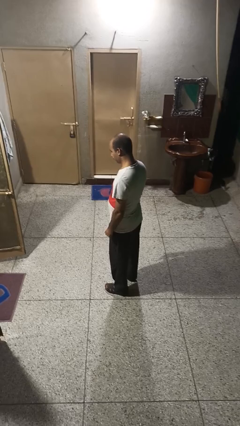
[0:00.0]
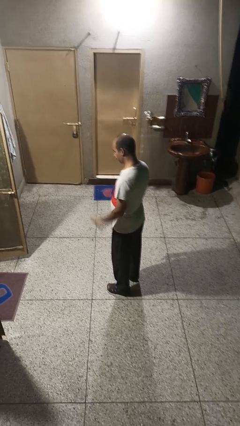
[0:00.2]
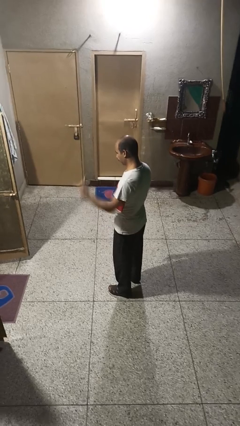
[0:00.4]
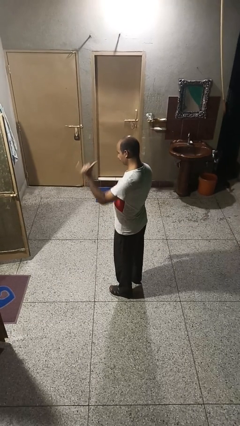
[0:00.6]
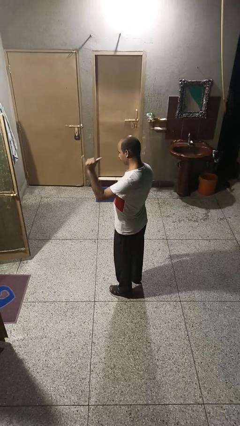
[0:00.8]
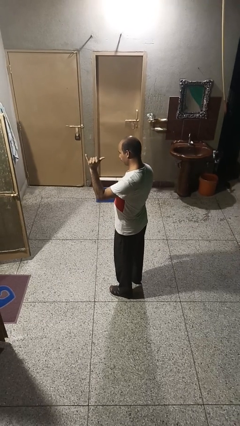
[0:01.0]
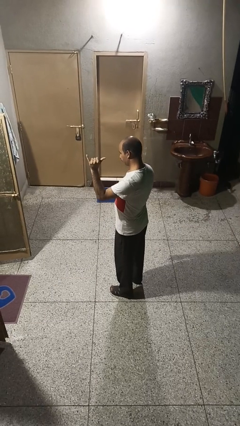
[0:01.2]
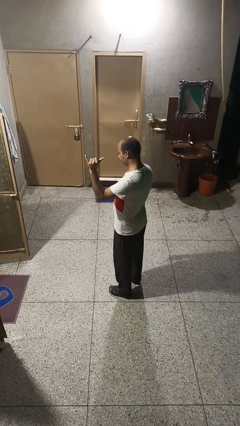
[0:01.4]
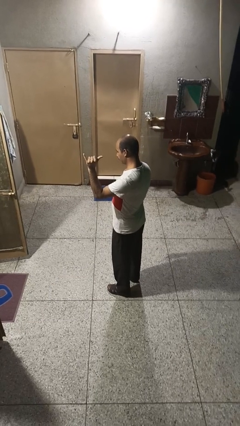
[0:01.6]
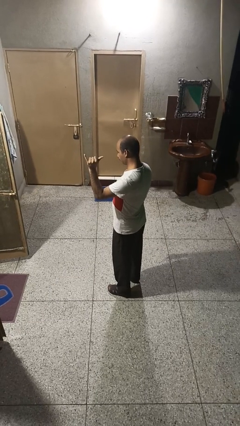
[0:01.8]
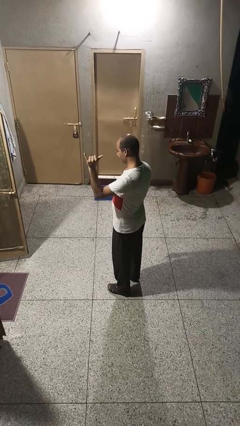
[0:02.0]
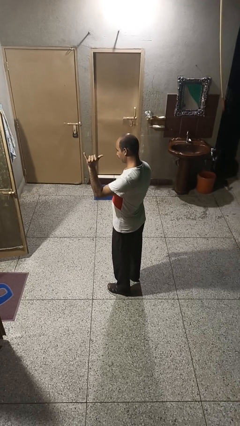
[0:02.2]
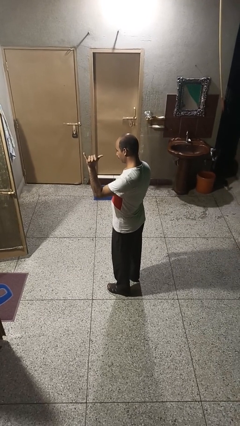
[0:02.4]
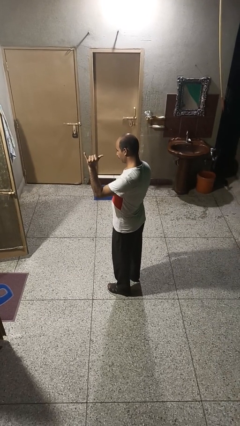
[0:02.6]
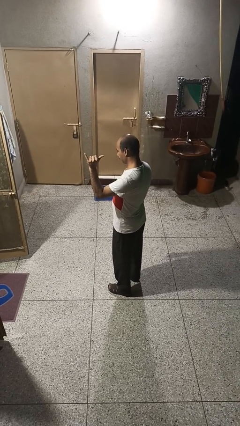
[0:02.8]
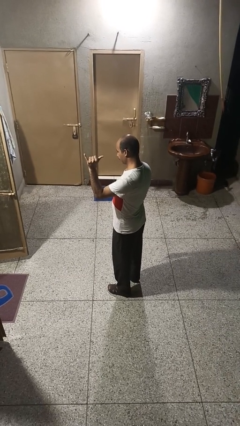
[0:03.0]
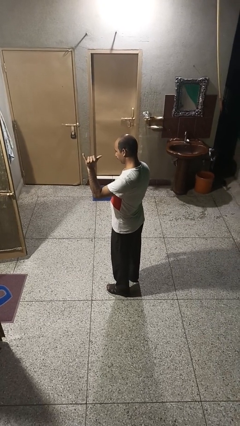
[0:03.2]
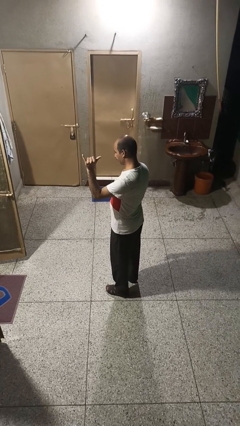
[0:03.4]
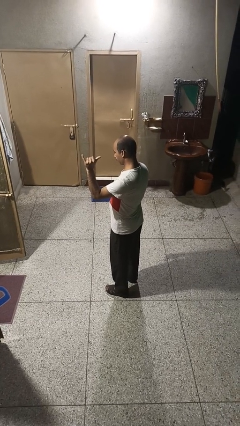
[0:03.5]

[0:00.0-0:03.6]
person gestures hang loose

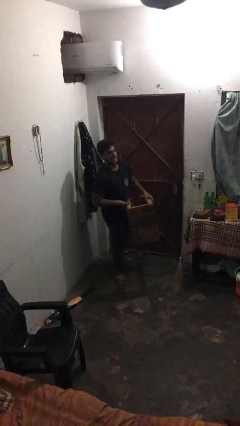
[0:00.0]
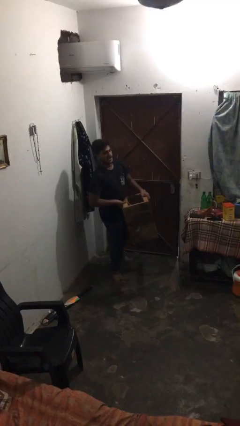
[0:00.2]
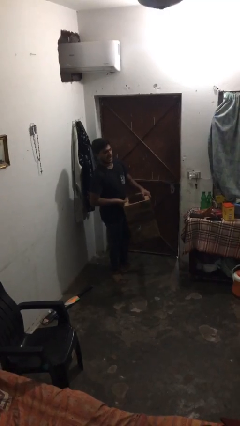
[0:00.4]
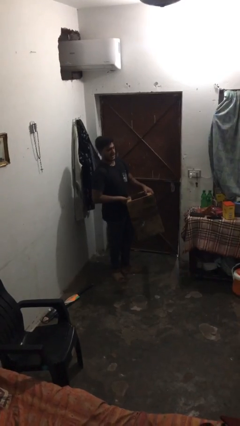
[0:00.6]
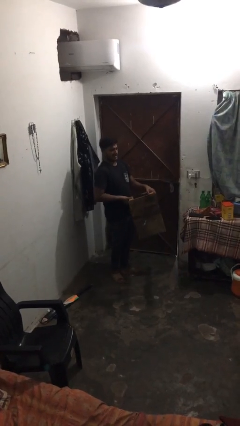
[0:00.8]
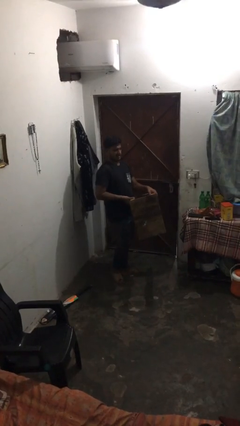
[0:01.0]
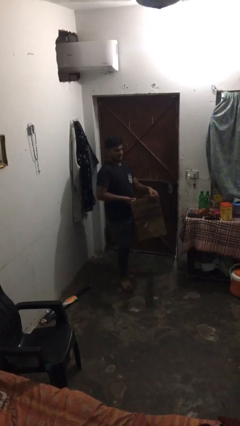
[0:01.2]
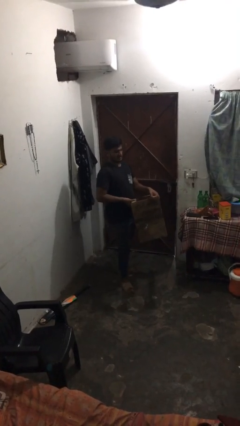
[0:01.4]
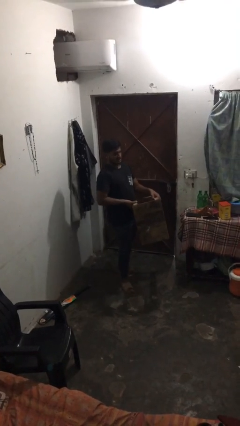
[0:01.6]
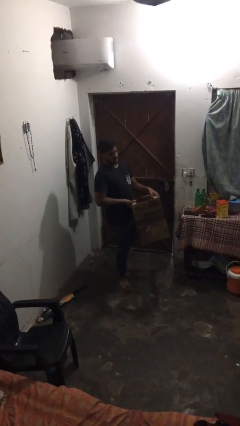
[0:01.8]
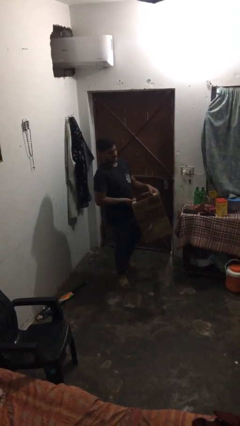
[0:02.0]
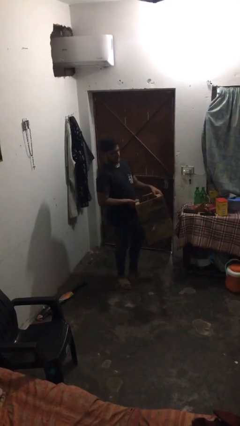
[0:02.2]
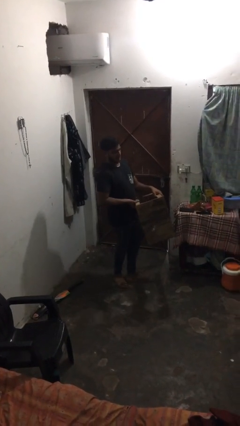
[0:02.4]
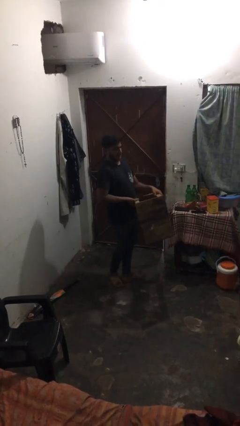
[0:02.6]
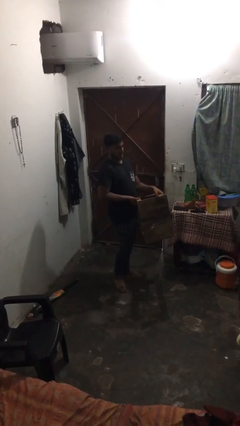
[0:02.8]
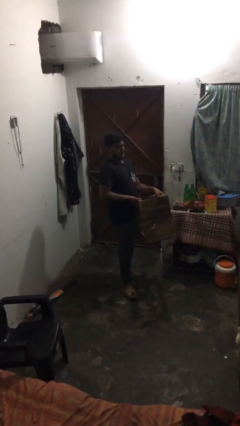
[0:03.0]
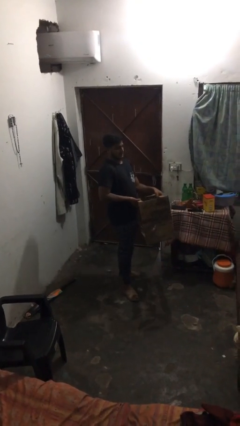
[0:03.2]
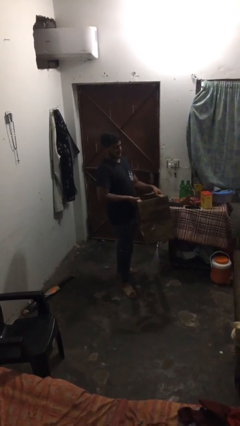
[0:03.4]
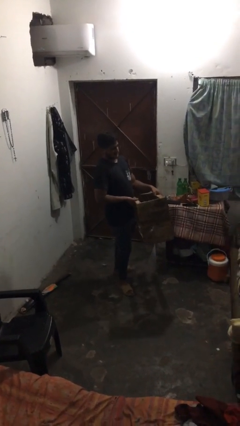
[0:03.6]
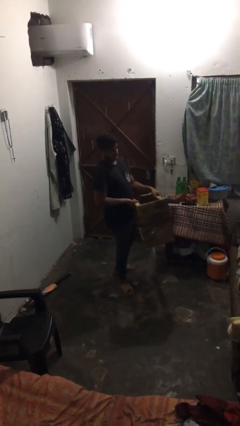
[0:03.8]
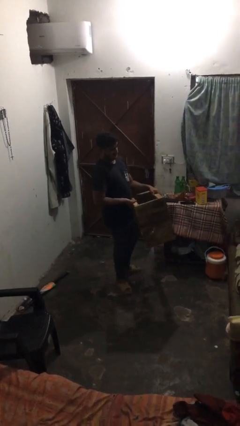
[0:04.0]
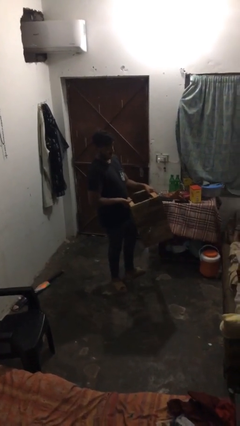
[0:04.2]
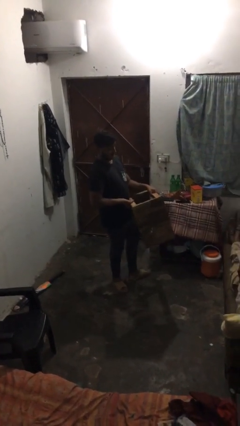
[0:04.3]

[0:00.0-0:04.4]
person carries heavy object

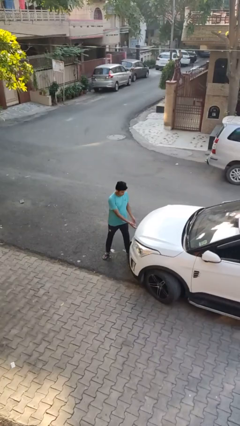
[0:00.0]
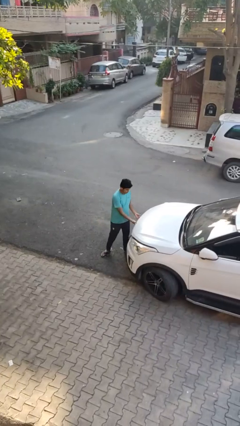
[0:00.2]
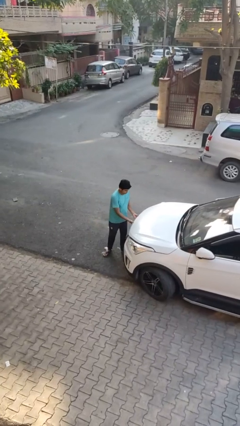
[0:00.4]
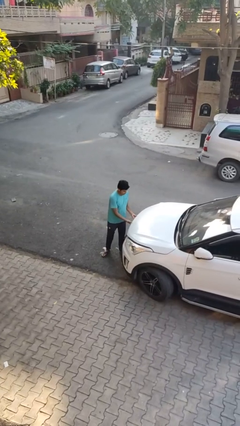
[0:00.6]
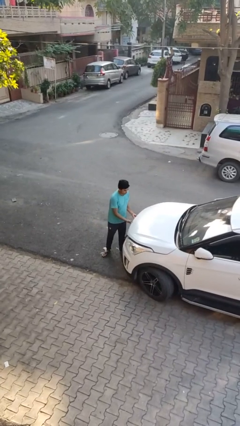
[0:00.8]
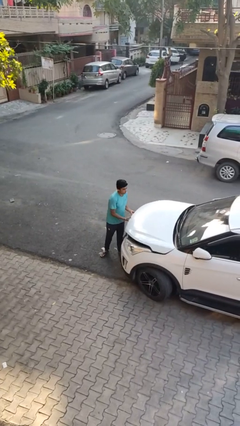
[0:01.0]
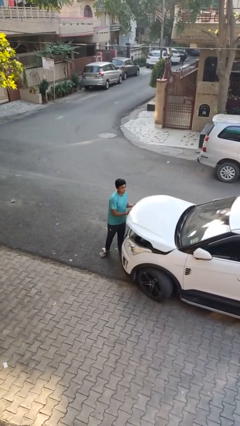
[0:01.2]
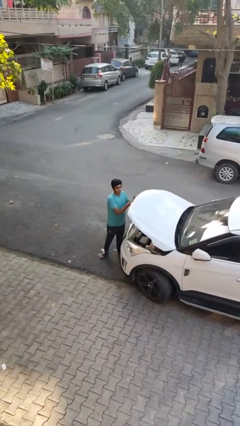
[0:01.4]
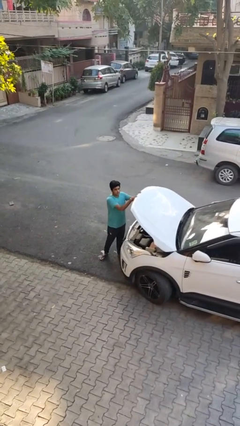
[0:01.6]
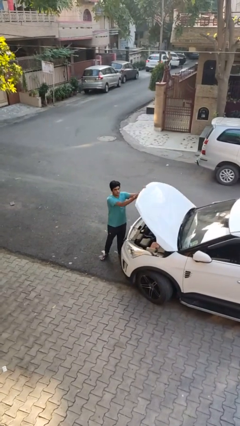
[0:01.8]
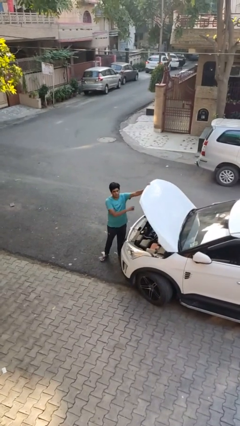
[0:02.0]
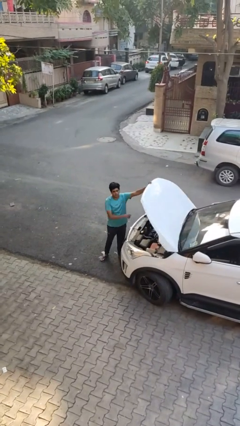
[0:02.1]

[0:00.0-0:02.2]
person opens car hood

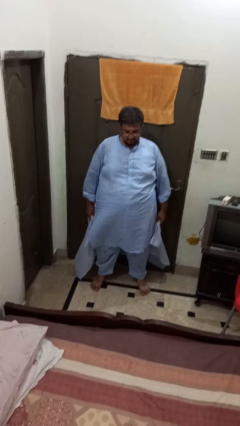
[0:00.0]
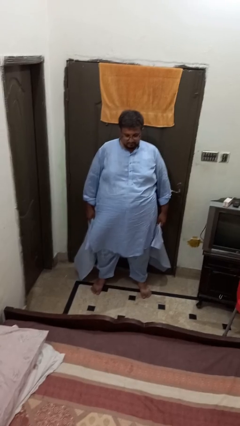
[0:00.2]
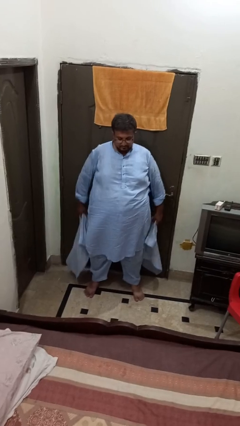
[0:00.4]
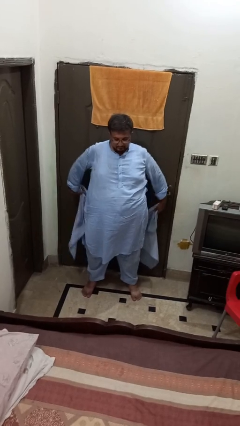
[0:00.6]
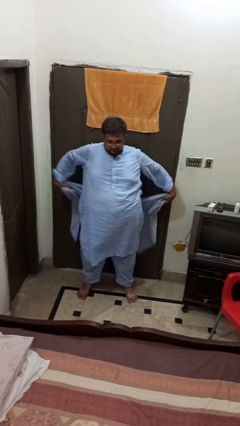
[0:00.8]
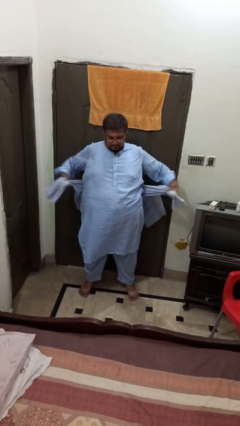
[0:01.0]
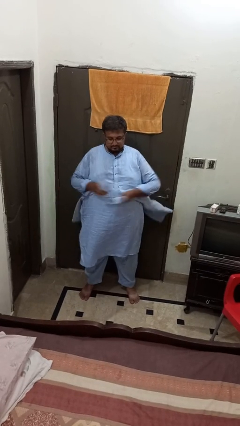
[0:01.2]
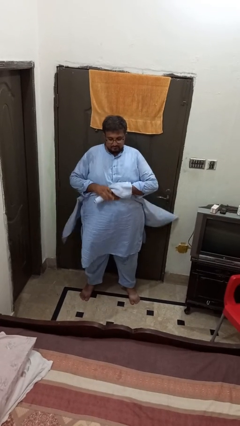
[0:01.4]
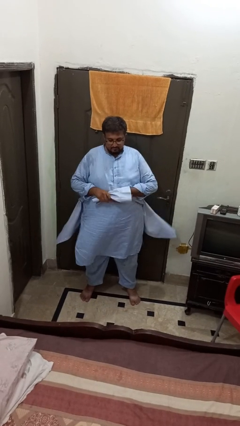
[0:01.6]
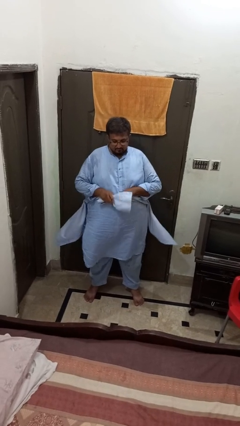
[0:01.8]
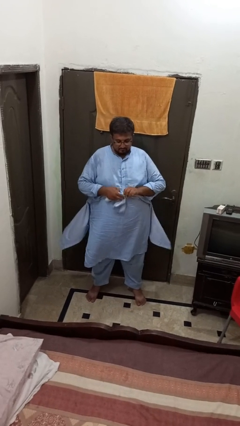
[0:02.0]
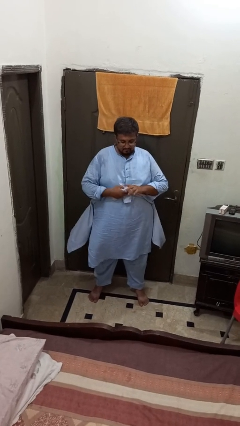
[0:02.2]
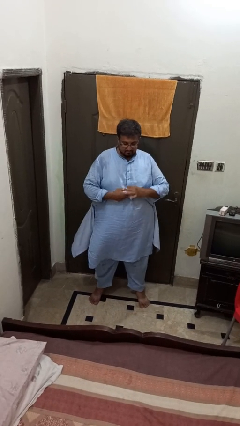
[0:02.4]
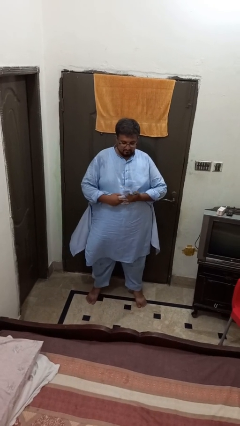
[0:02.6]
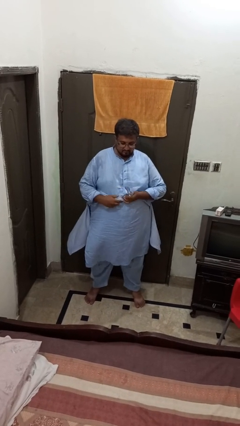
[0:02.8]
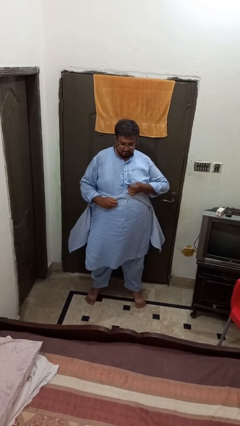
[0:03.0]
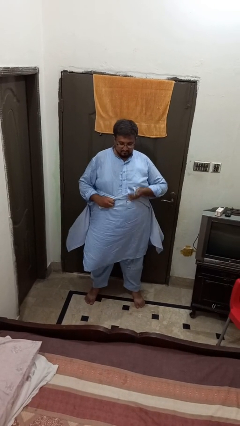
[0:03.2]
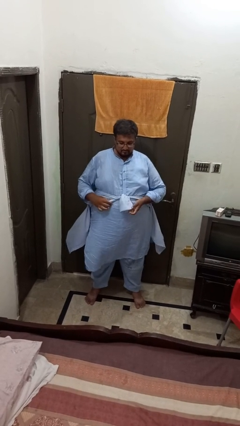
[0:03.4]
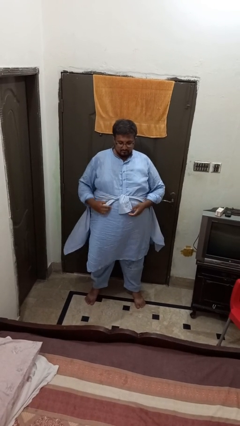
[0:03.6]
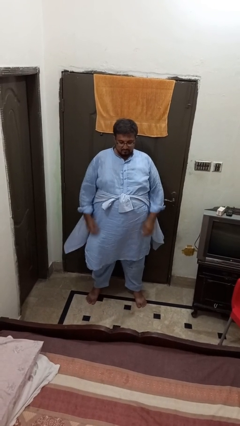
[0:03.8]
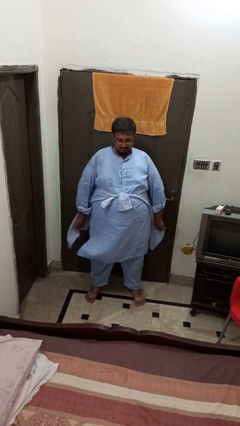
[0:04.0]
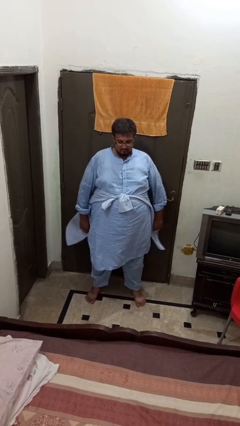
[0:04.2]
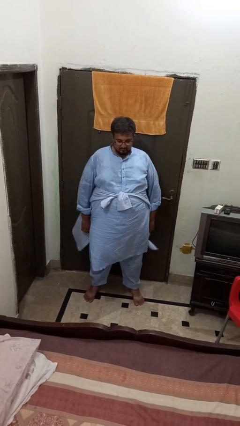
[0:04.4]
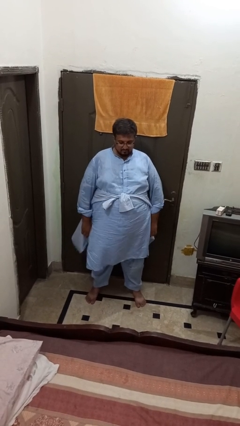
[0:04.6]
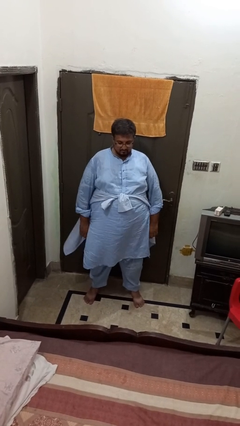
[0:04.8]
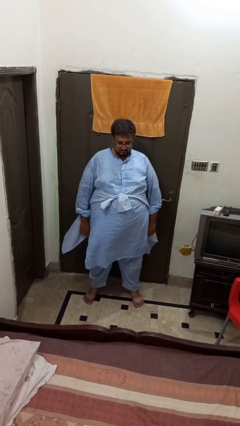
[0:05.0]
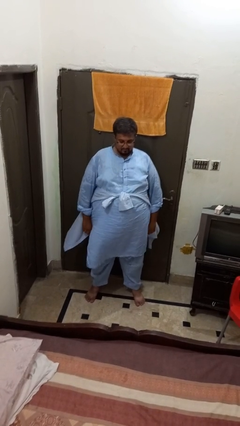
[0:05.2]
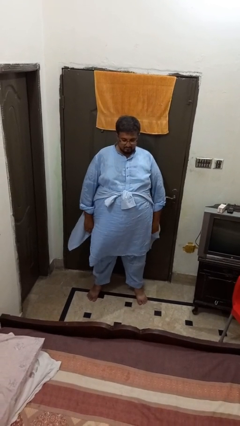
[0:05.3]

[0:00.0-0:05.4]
person ties jacket around waist

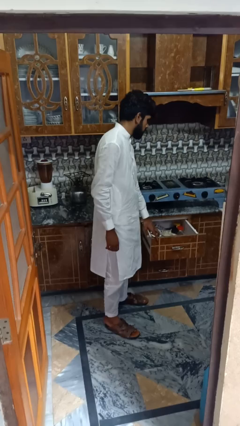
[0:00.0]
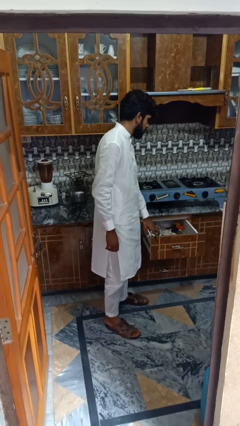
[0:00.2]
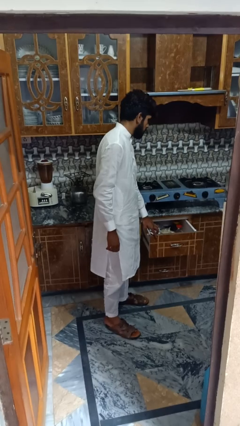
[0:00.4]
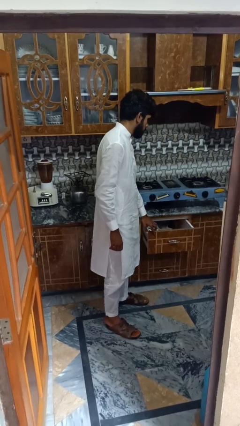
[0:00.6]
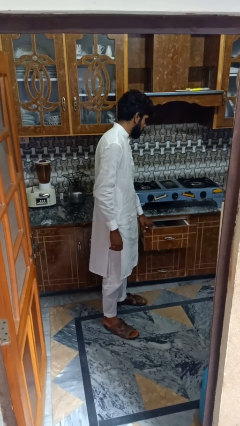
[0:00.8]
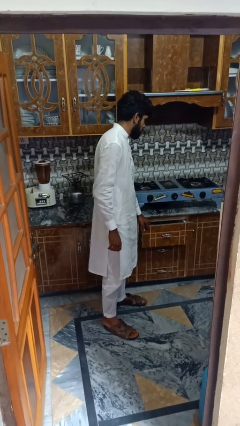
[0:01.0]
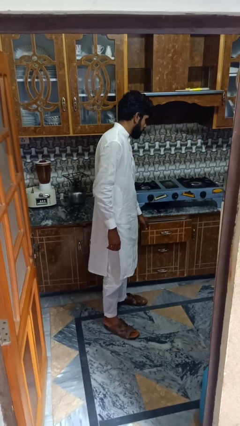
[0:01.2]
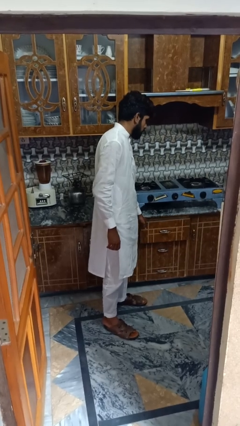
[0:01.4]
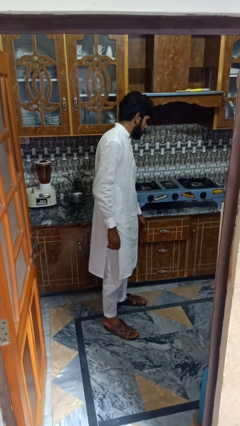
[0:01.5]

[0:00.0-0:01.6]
person closes kitchen drawer

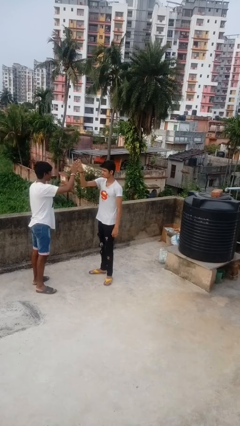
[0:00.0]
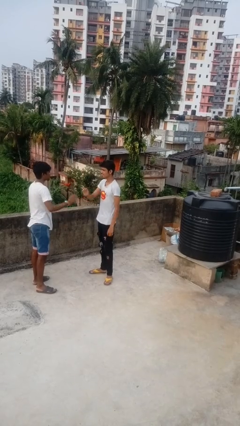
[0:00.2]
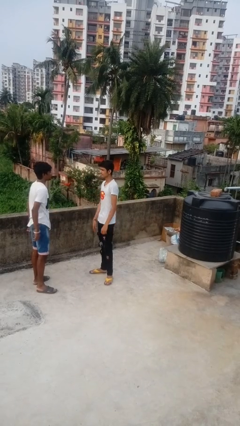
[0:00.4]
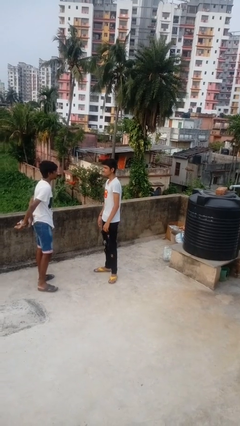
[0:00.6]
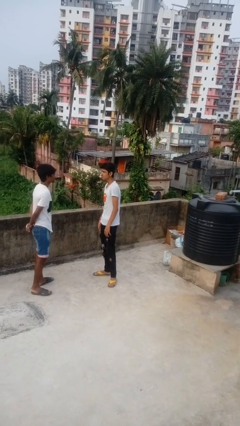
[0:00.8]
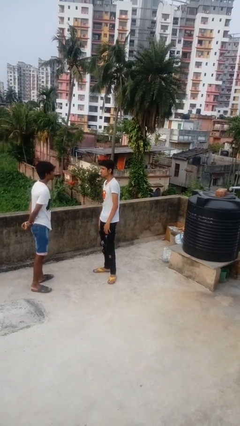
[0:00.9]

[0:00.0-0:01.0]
person highfives hand
